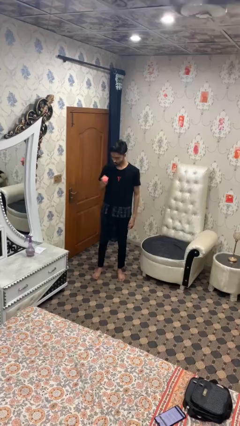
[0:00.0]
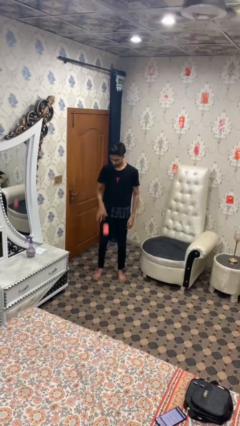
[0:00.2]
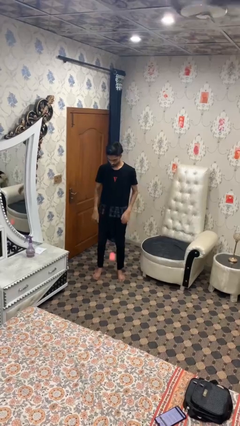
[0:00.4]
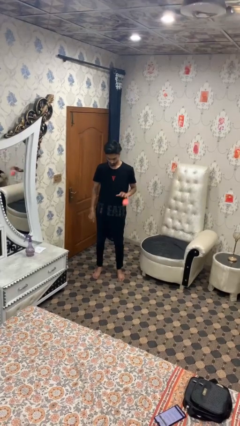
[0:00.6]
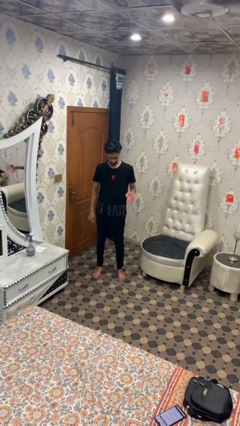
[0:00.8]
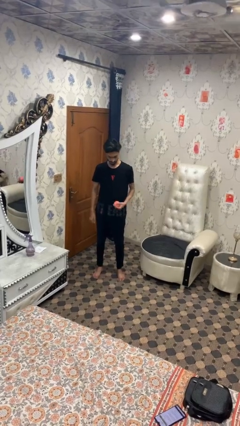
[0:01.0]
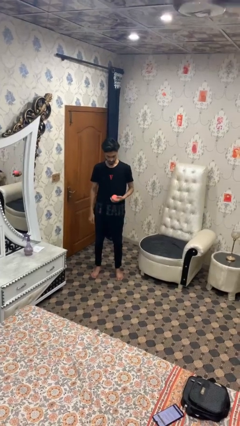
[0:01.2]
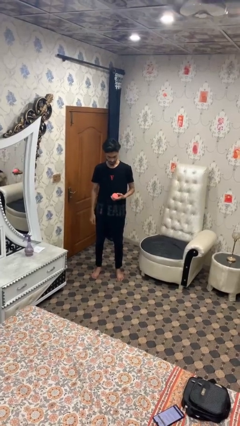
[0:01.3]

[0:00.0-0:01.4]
person bounces ball on floor

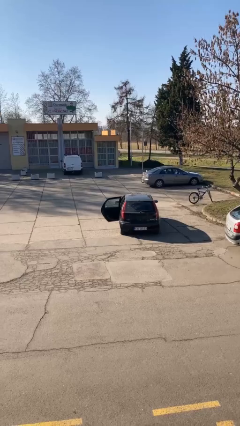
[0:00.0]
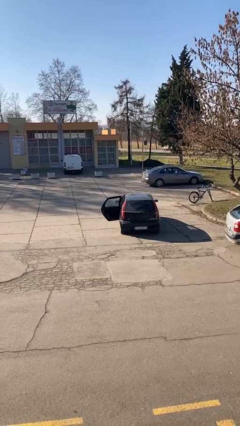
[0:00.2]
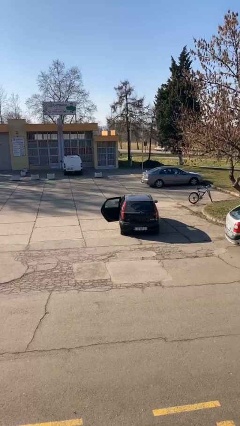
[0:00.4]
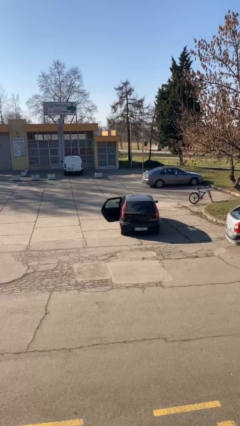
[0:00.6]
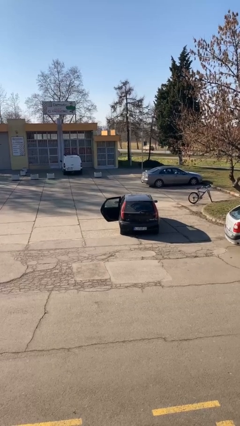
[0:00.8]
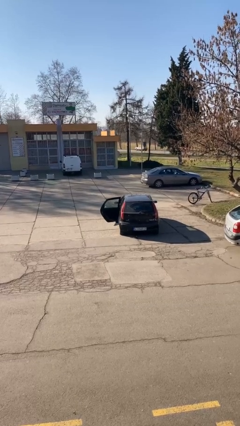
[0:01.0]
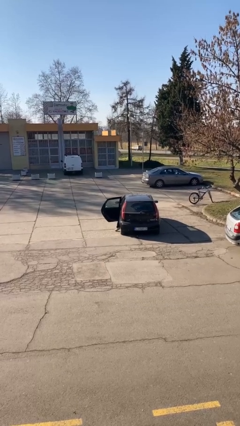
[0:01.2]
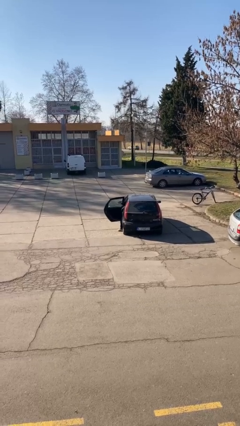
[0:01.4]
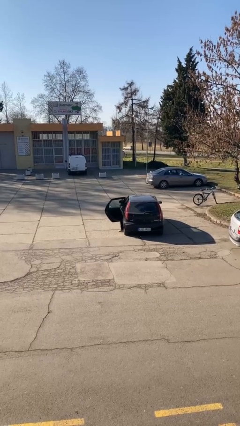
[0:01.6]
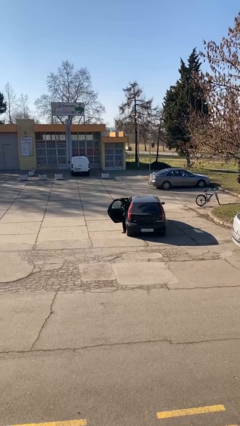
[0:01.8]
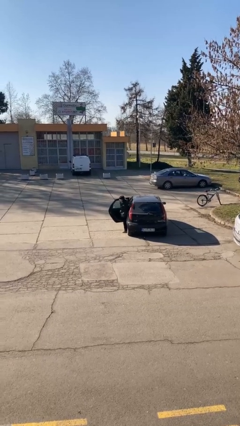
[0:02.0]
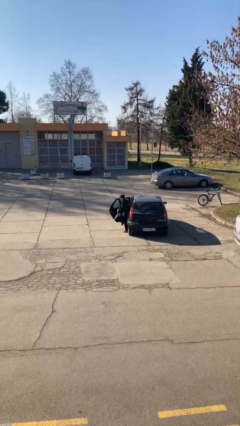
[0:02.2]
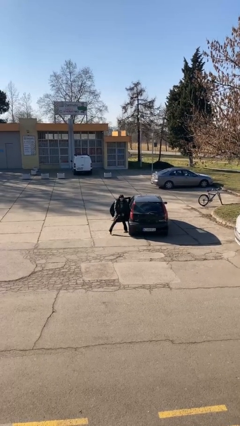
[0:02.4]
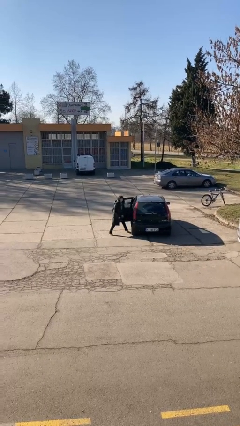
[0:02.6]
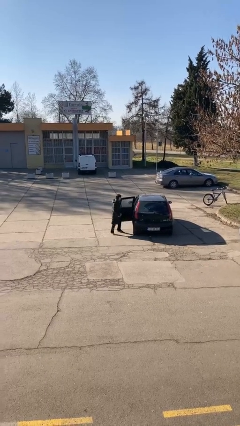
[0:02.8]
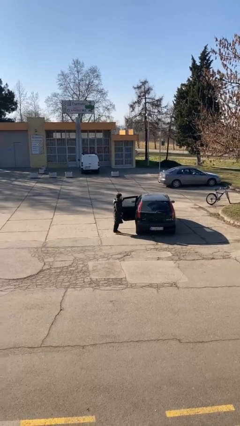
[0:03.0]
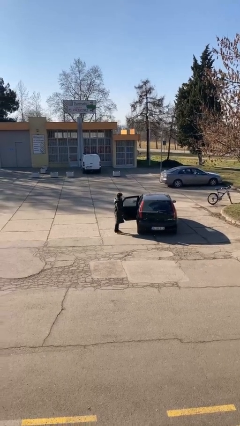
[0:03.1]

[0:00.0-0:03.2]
person exits car

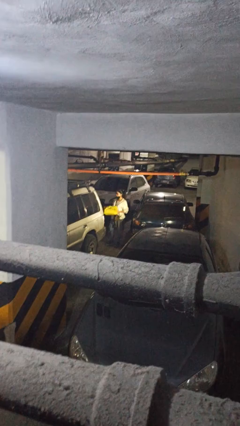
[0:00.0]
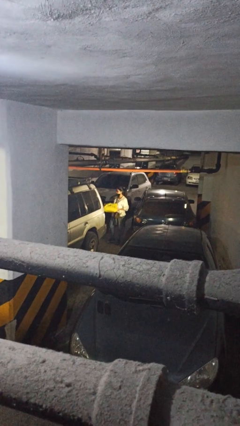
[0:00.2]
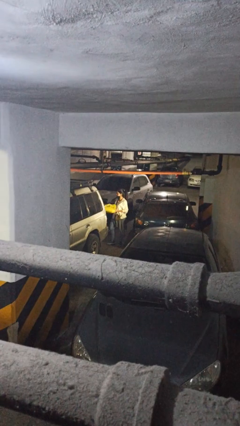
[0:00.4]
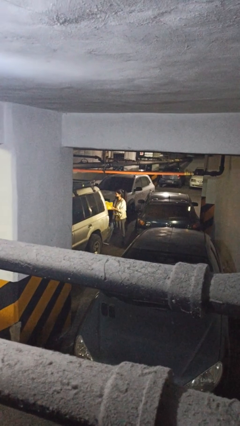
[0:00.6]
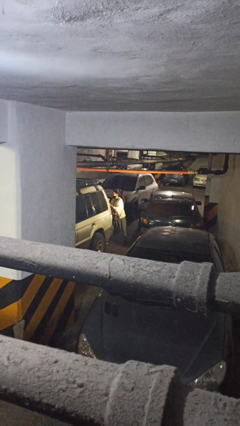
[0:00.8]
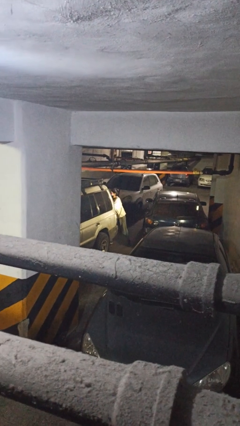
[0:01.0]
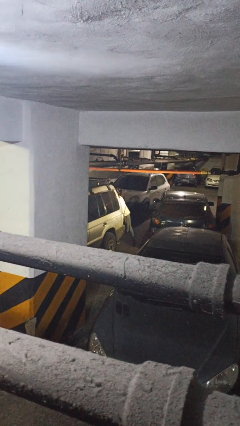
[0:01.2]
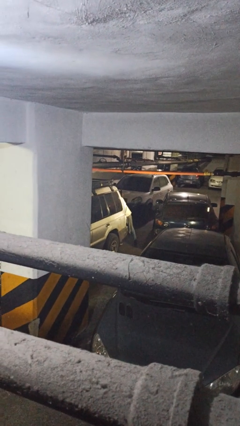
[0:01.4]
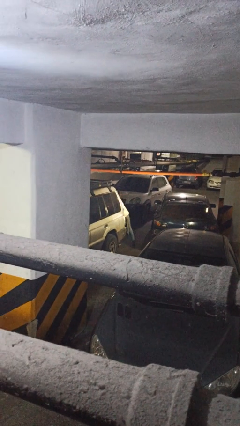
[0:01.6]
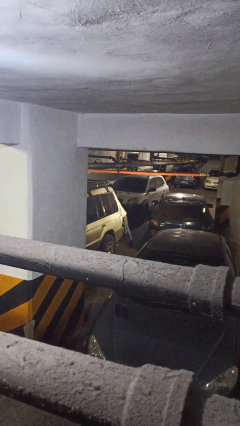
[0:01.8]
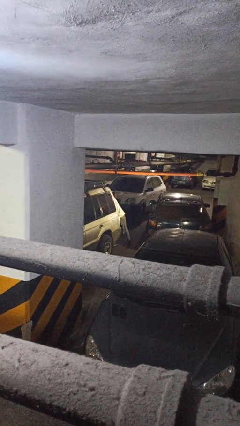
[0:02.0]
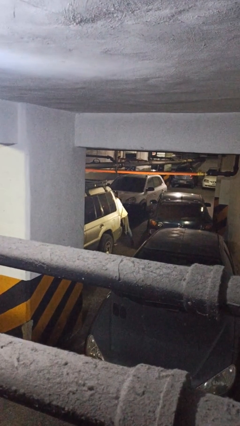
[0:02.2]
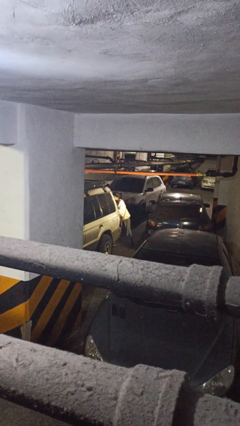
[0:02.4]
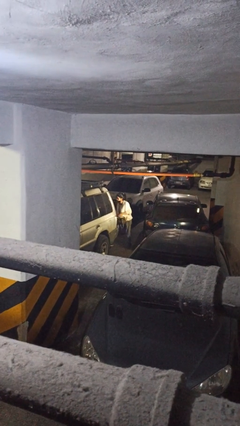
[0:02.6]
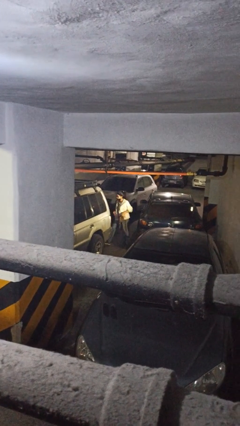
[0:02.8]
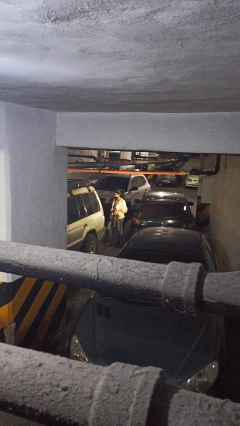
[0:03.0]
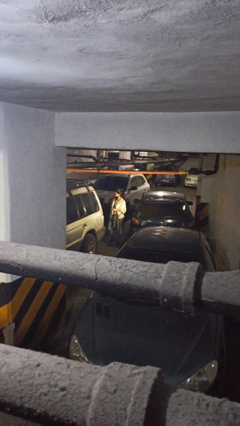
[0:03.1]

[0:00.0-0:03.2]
person loads car

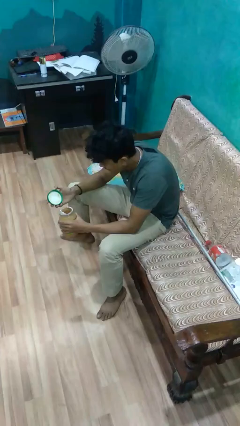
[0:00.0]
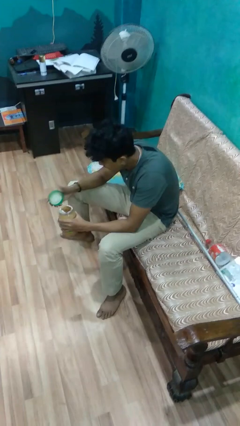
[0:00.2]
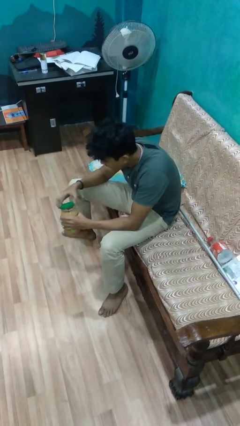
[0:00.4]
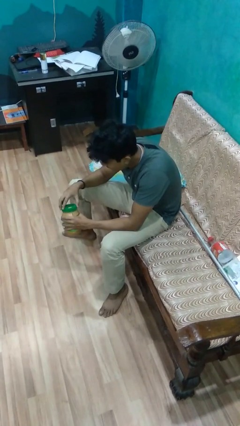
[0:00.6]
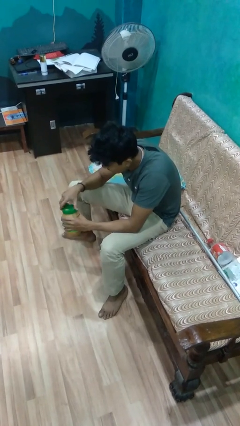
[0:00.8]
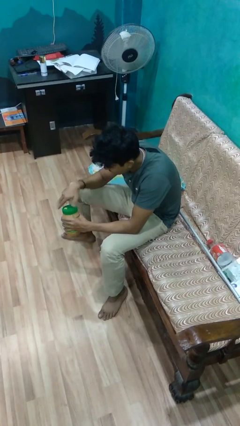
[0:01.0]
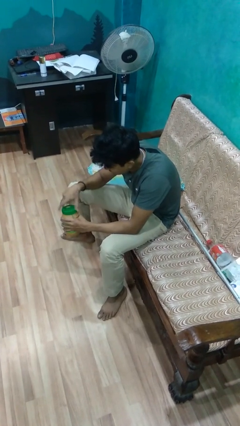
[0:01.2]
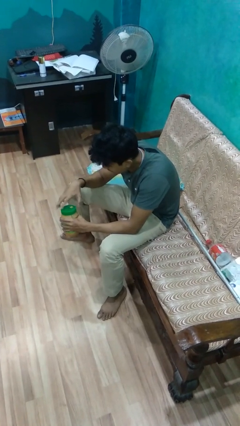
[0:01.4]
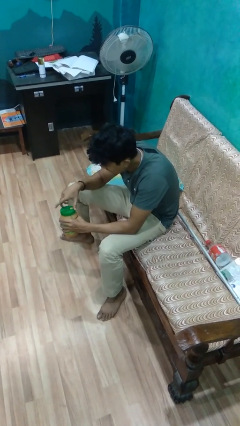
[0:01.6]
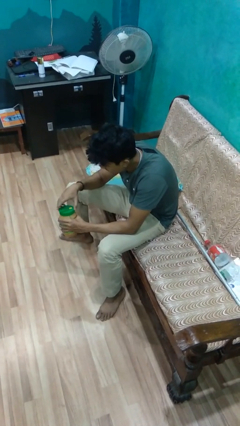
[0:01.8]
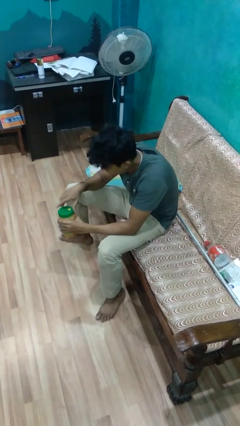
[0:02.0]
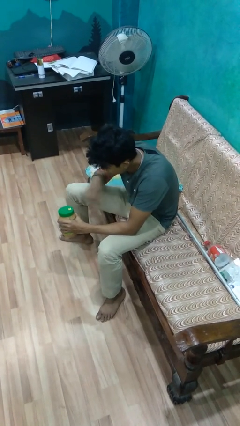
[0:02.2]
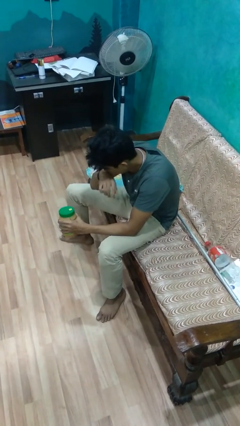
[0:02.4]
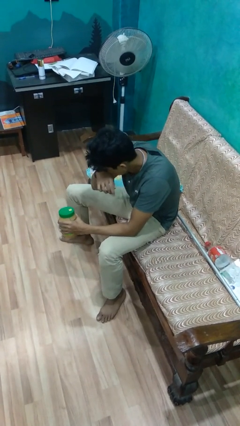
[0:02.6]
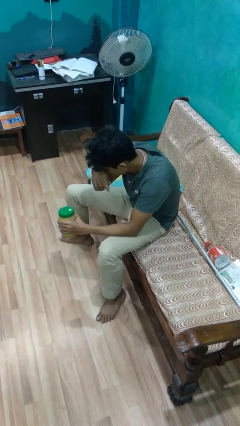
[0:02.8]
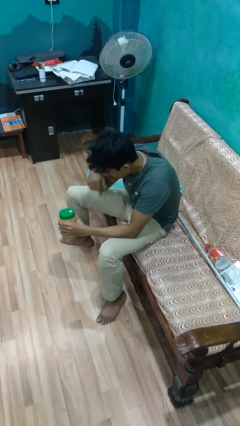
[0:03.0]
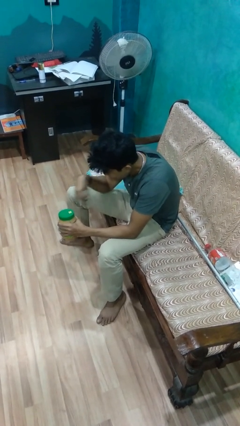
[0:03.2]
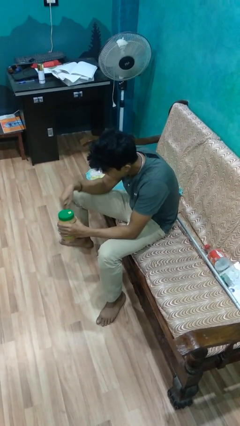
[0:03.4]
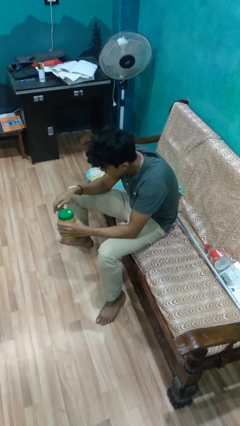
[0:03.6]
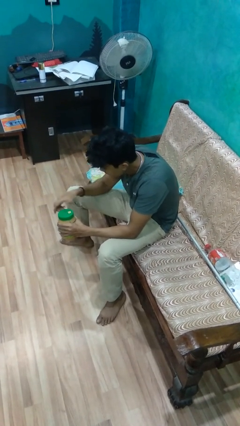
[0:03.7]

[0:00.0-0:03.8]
person closes jar

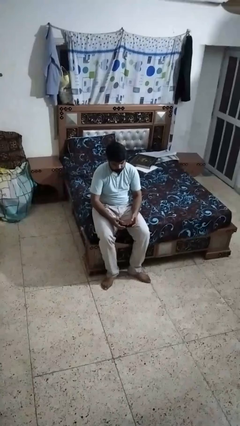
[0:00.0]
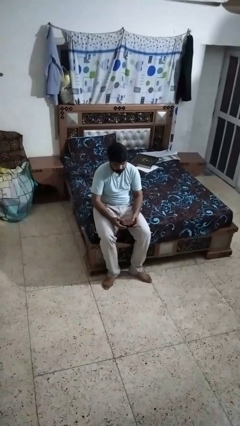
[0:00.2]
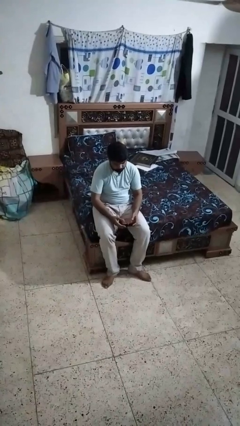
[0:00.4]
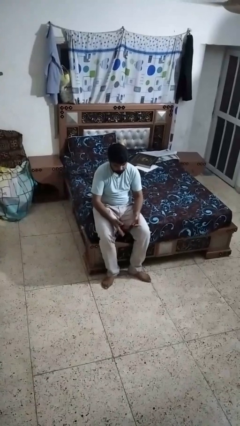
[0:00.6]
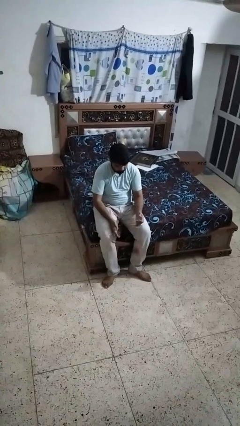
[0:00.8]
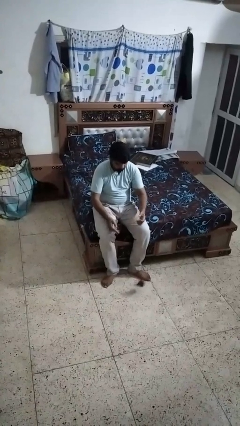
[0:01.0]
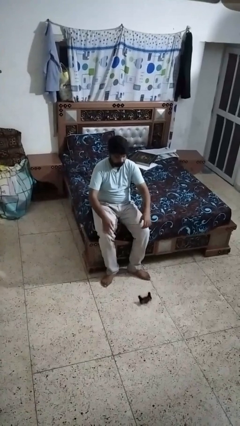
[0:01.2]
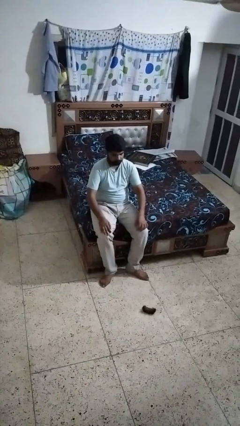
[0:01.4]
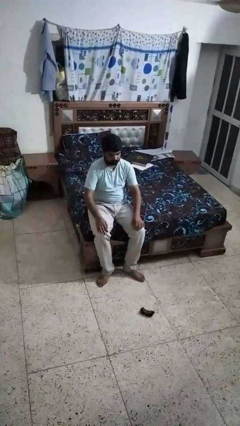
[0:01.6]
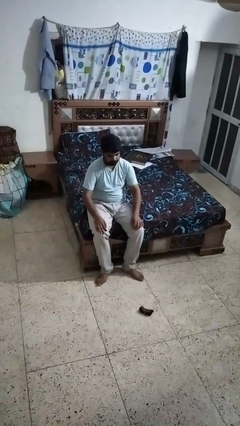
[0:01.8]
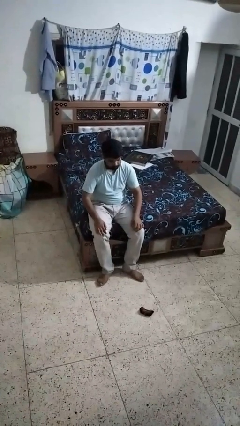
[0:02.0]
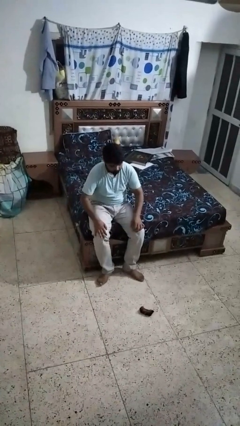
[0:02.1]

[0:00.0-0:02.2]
person drops object

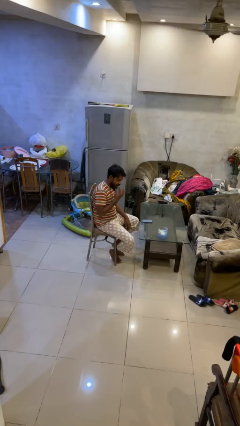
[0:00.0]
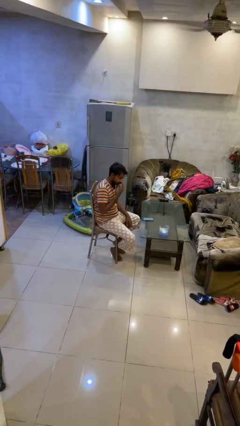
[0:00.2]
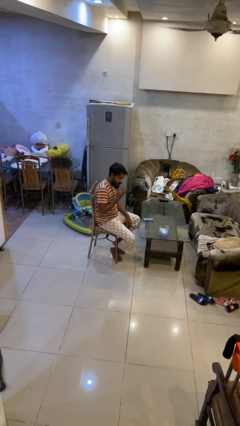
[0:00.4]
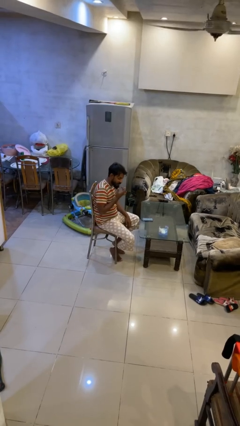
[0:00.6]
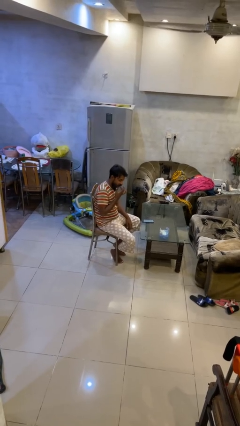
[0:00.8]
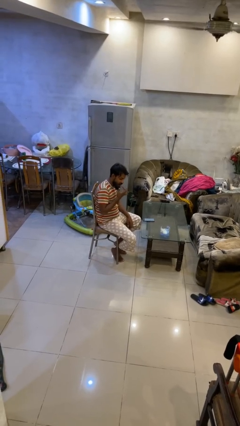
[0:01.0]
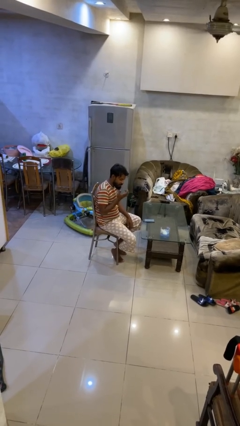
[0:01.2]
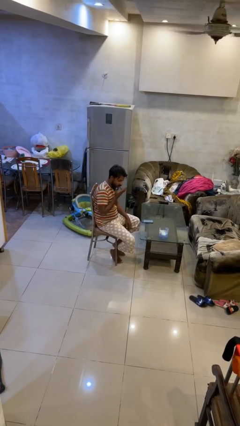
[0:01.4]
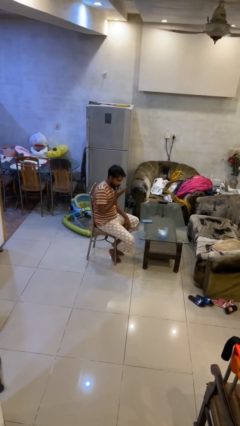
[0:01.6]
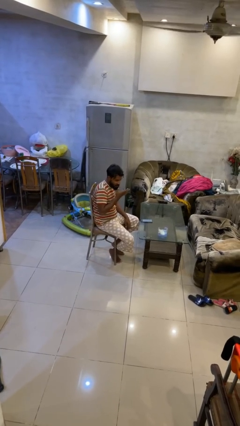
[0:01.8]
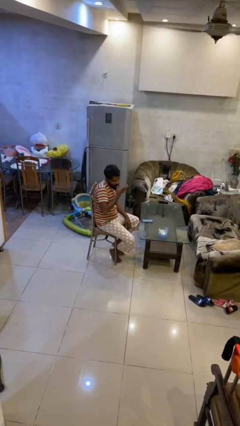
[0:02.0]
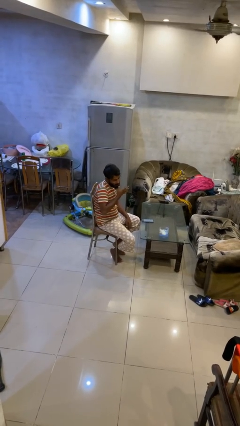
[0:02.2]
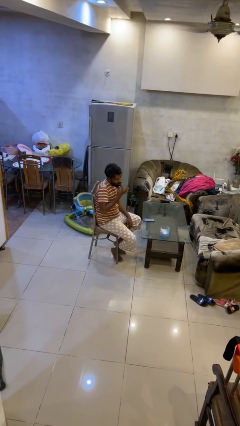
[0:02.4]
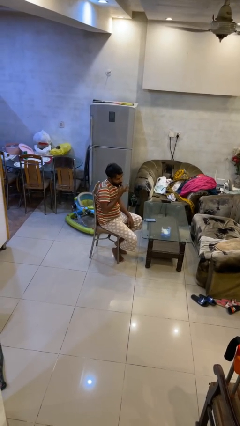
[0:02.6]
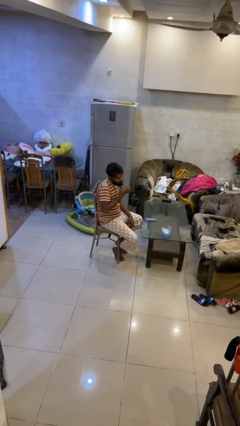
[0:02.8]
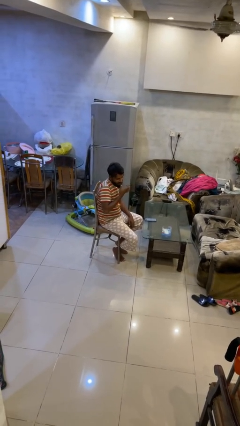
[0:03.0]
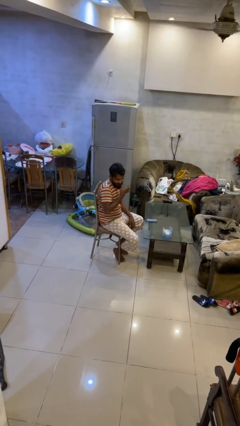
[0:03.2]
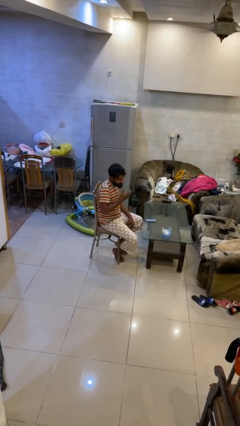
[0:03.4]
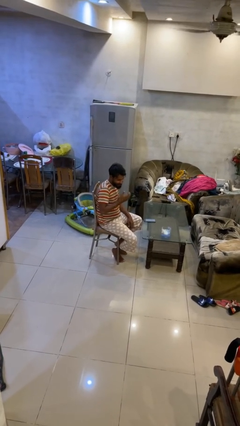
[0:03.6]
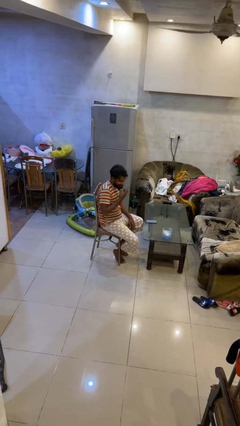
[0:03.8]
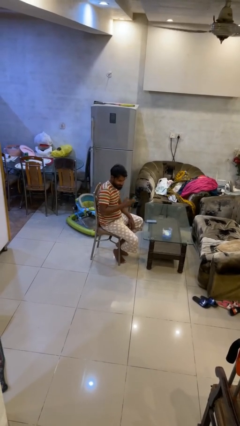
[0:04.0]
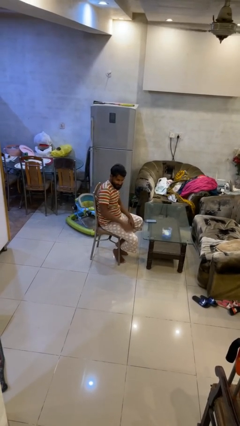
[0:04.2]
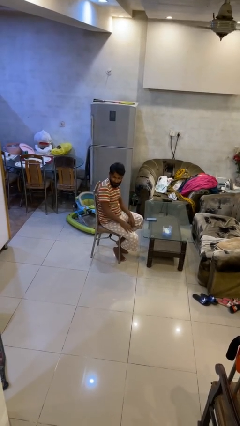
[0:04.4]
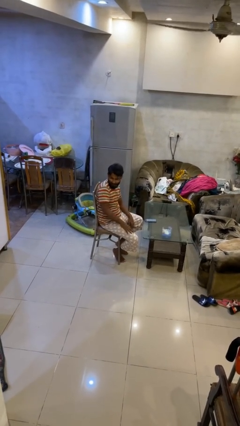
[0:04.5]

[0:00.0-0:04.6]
person licks fingers
